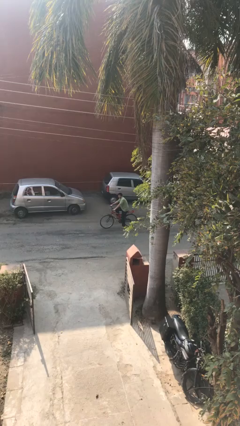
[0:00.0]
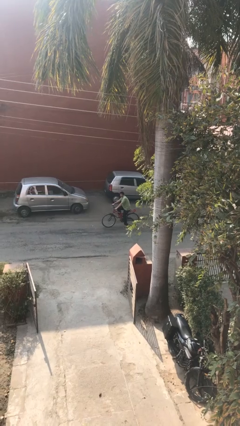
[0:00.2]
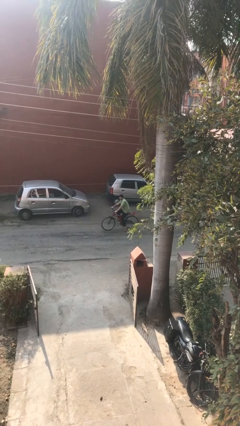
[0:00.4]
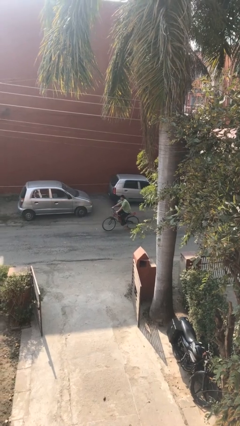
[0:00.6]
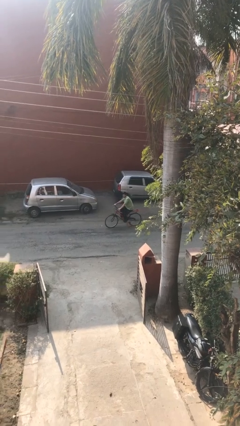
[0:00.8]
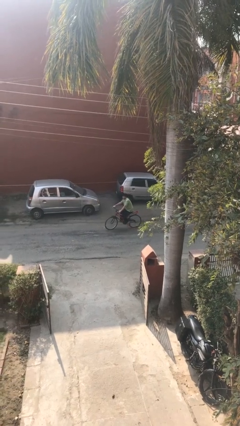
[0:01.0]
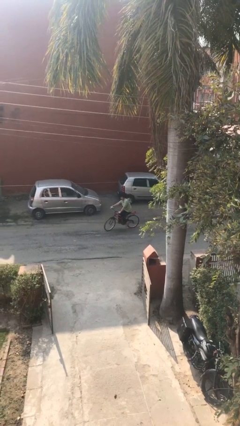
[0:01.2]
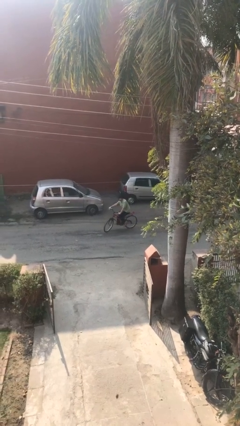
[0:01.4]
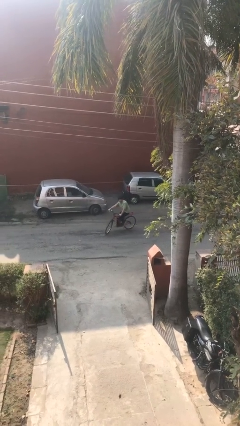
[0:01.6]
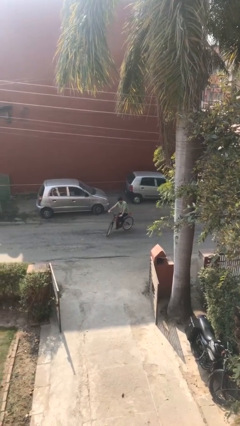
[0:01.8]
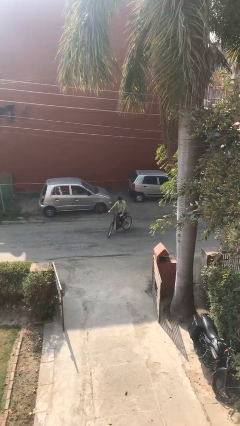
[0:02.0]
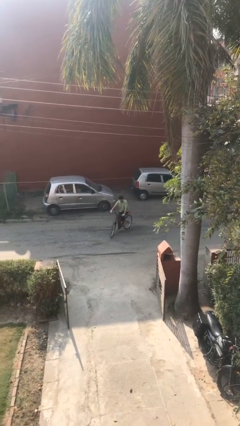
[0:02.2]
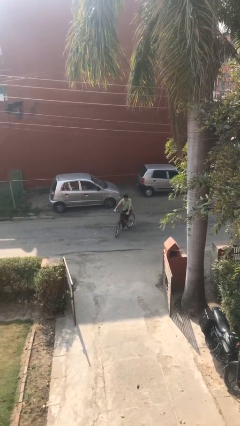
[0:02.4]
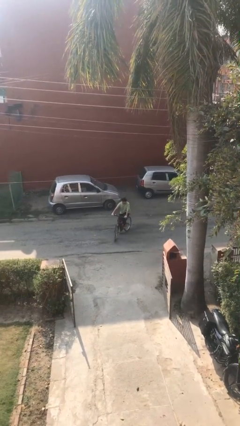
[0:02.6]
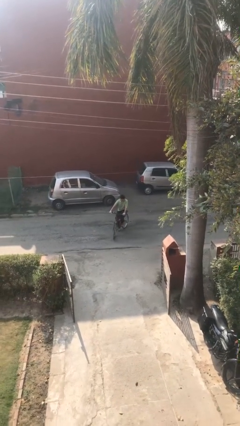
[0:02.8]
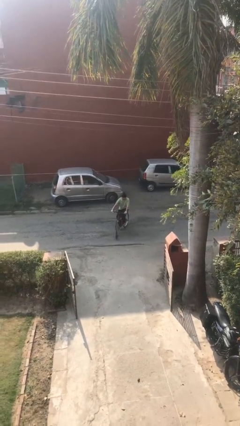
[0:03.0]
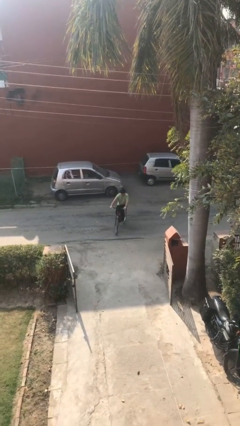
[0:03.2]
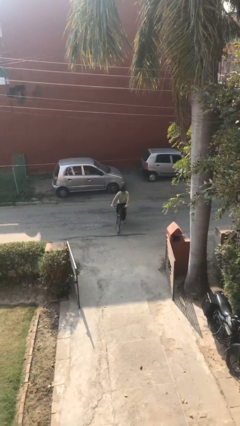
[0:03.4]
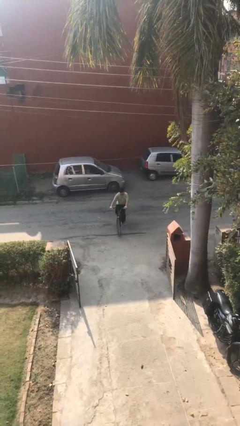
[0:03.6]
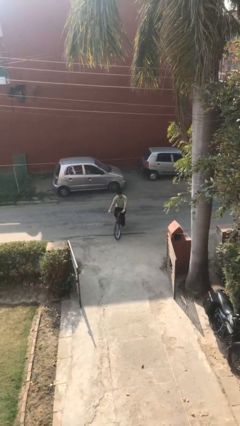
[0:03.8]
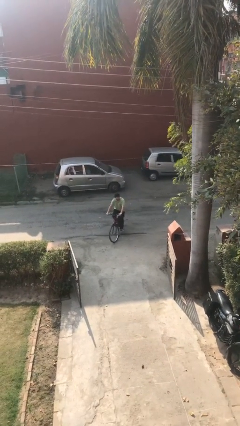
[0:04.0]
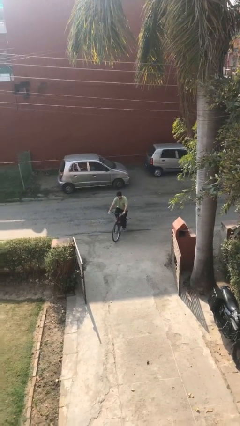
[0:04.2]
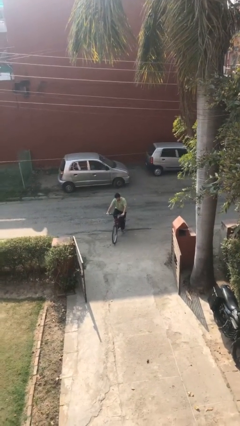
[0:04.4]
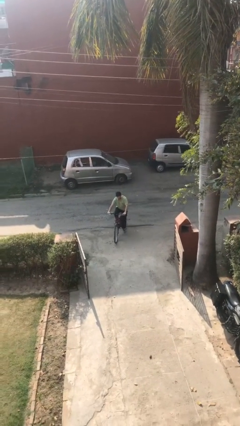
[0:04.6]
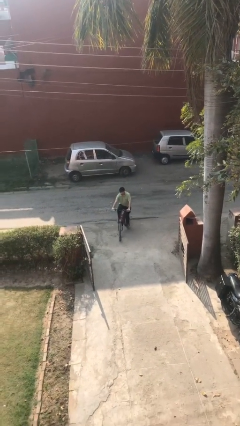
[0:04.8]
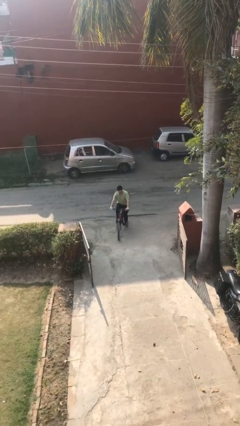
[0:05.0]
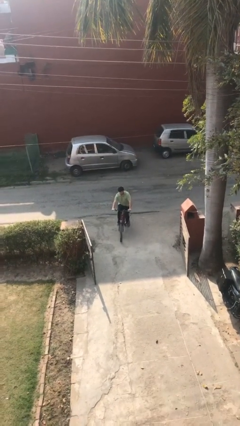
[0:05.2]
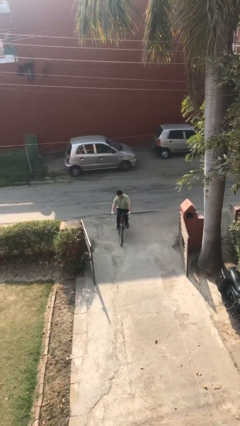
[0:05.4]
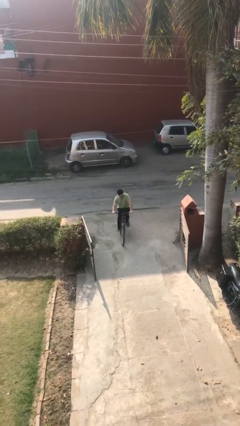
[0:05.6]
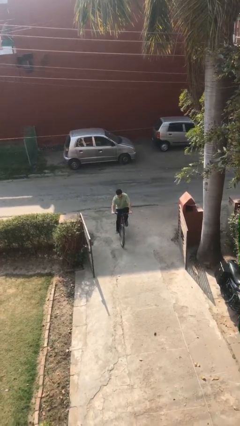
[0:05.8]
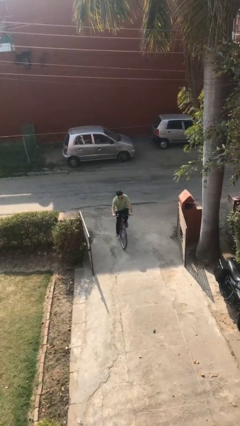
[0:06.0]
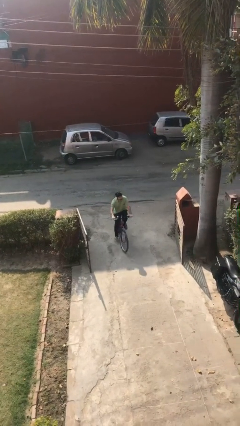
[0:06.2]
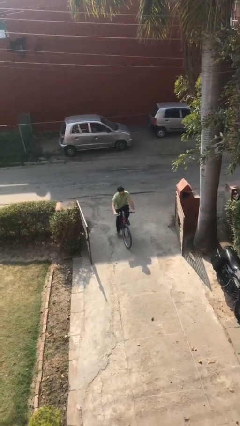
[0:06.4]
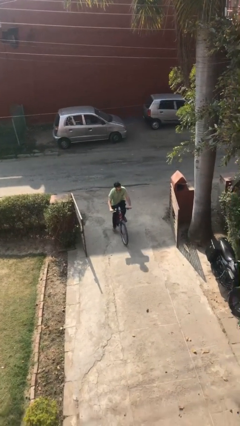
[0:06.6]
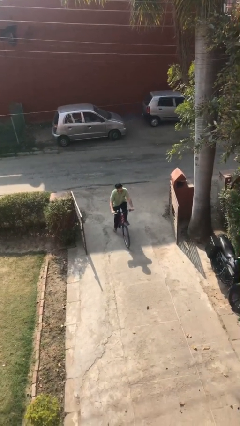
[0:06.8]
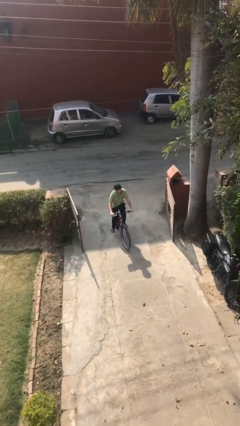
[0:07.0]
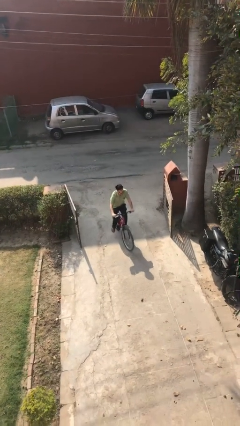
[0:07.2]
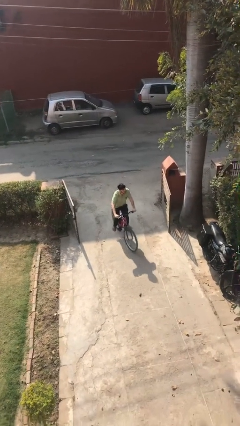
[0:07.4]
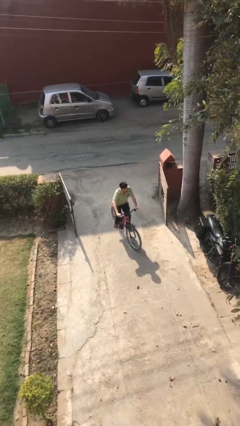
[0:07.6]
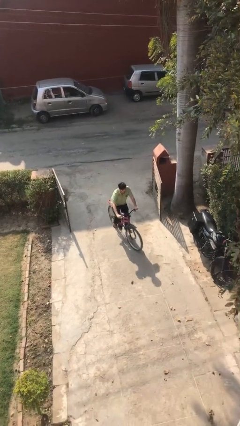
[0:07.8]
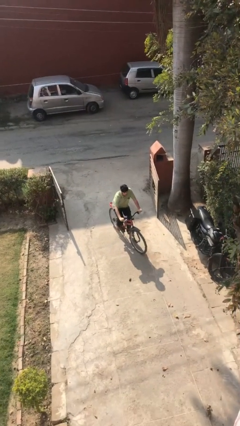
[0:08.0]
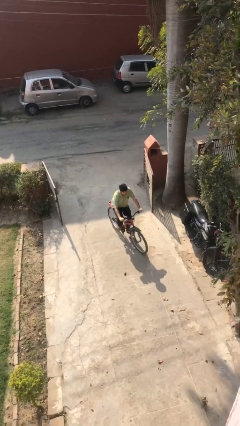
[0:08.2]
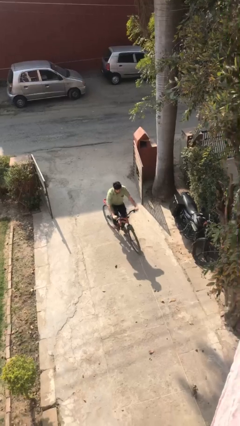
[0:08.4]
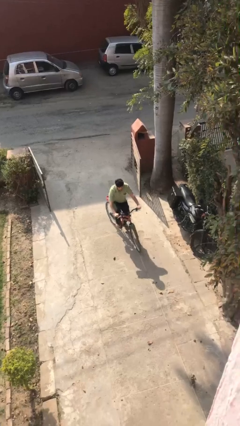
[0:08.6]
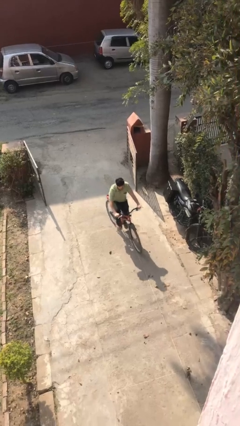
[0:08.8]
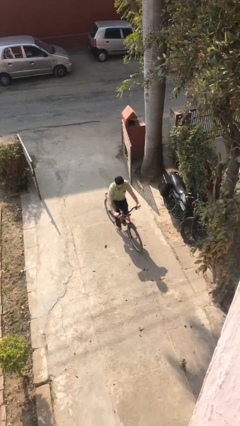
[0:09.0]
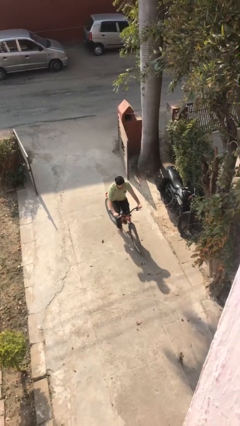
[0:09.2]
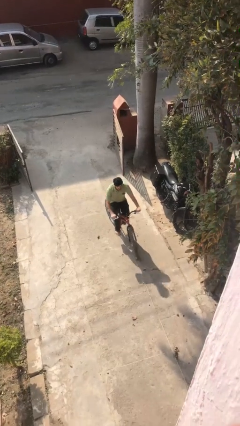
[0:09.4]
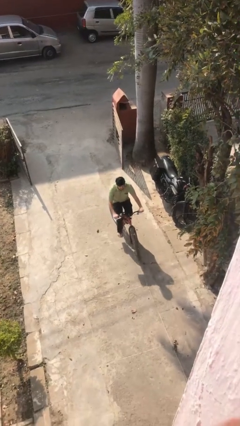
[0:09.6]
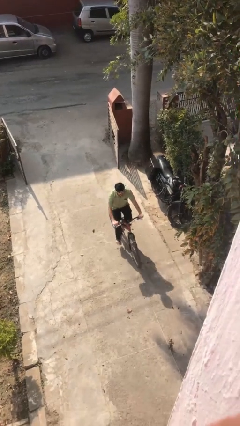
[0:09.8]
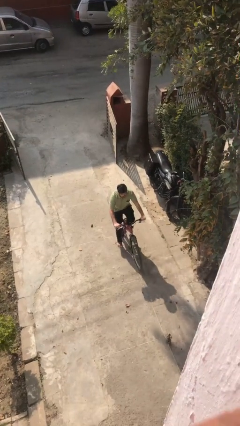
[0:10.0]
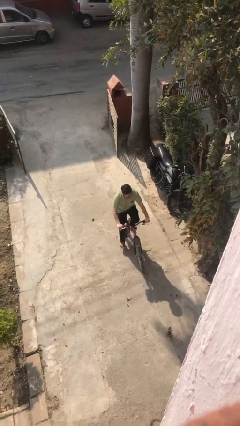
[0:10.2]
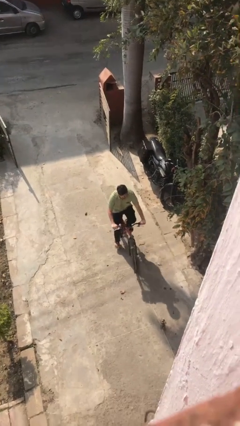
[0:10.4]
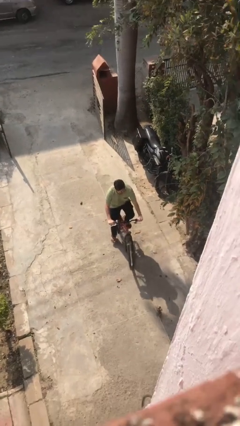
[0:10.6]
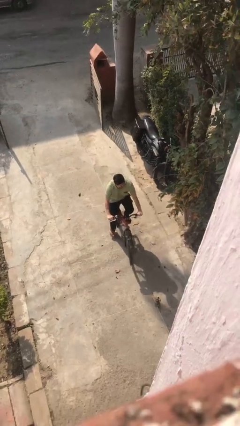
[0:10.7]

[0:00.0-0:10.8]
person rides bicycle

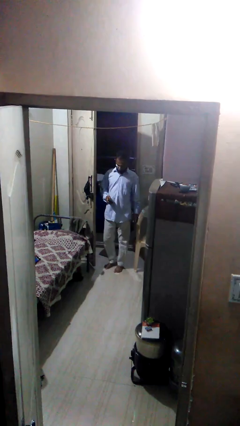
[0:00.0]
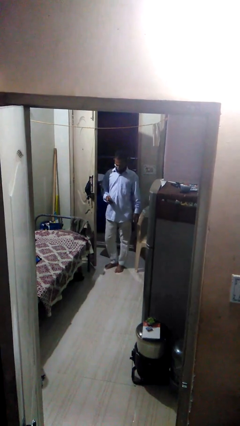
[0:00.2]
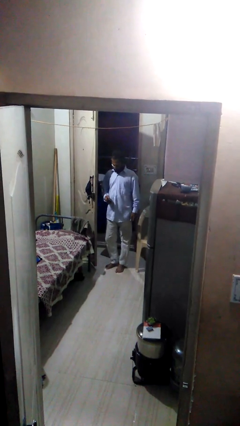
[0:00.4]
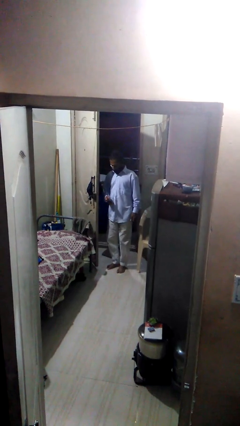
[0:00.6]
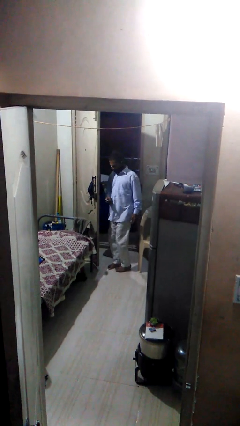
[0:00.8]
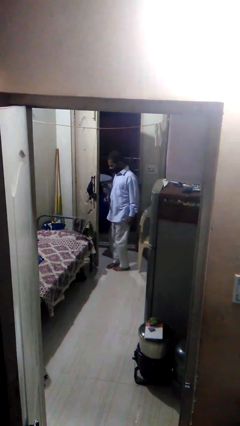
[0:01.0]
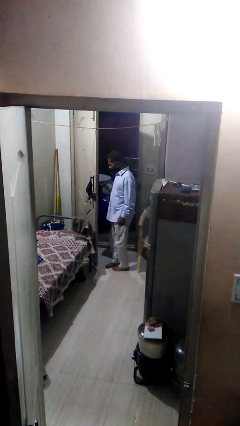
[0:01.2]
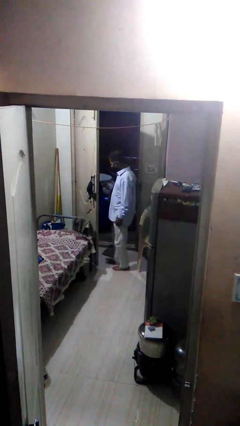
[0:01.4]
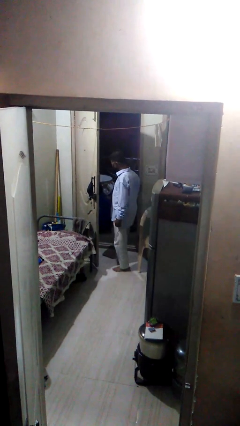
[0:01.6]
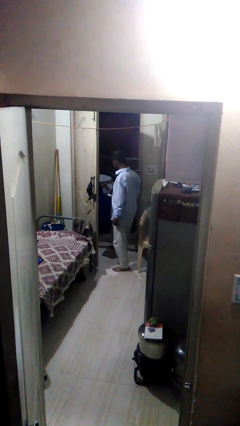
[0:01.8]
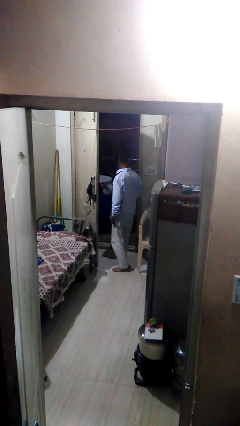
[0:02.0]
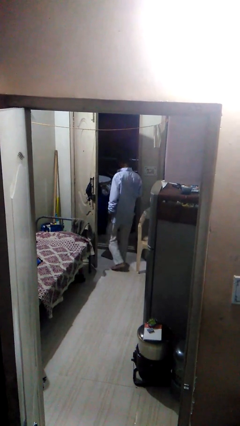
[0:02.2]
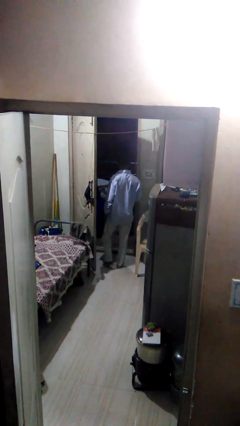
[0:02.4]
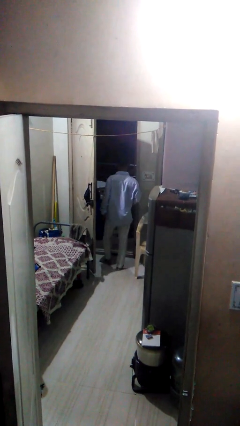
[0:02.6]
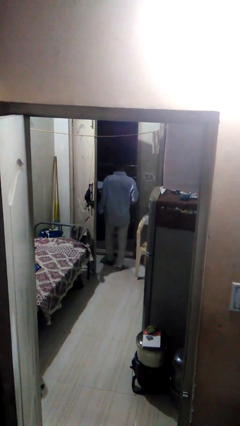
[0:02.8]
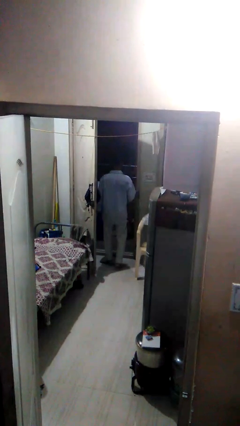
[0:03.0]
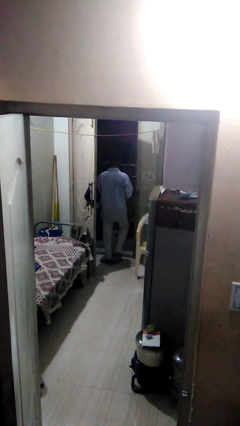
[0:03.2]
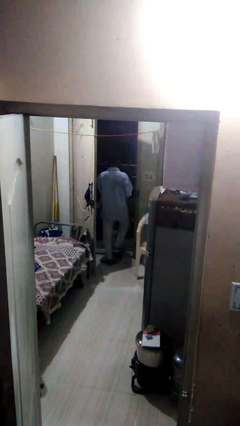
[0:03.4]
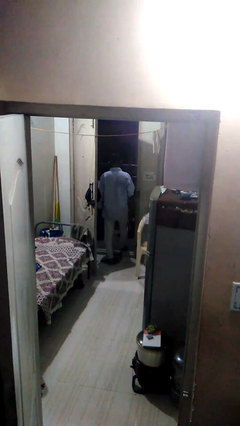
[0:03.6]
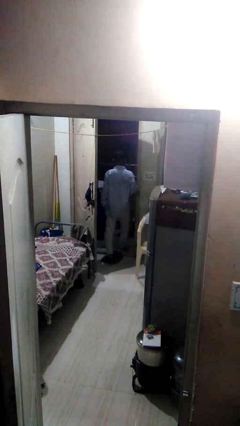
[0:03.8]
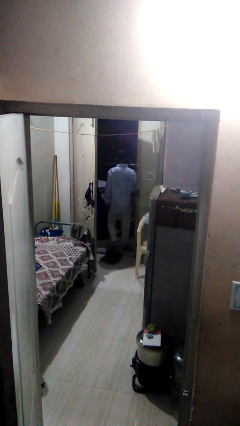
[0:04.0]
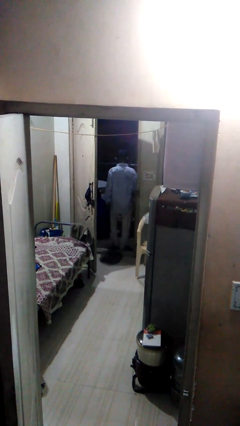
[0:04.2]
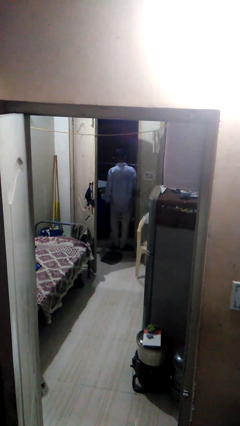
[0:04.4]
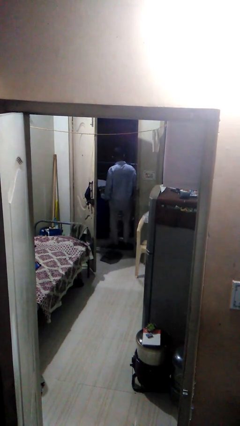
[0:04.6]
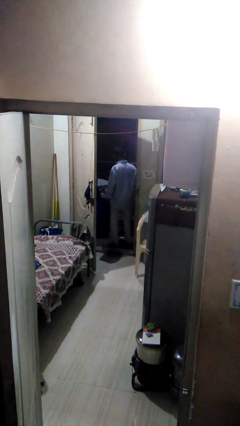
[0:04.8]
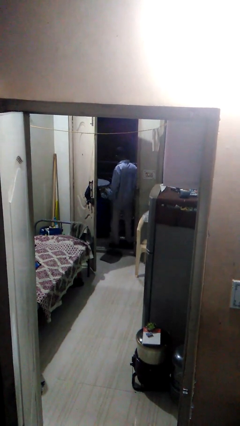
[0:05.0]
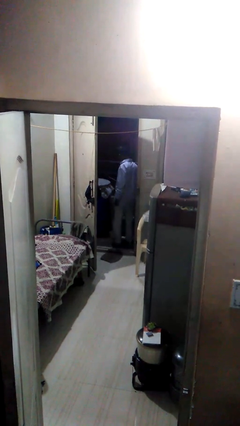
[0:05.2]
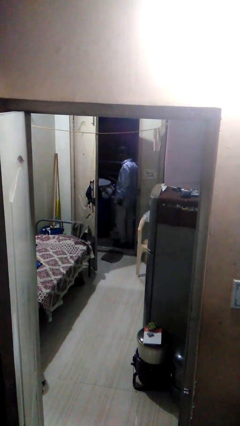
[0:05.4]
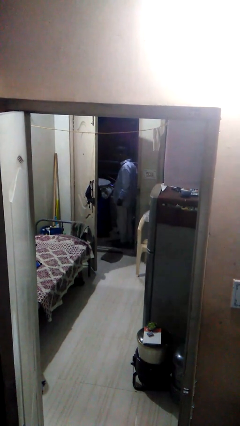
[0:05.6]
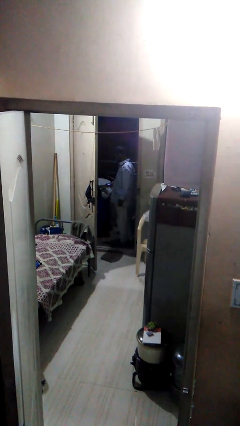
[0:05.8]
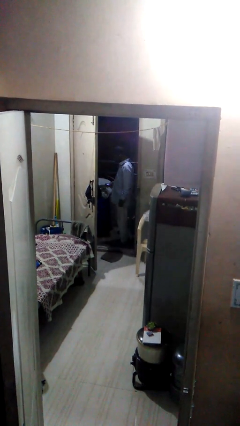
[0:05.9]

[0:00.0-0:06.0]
person exits scene through structure

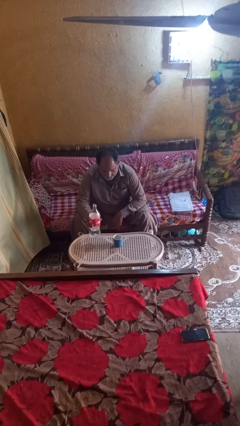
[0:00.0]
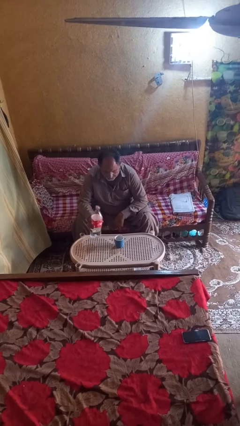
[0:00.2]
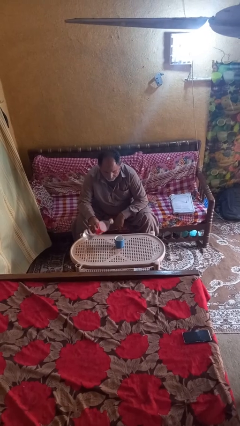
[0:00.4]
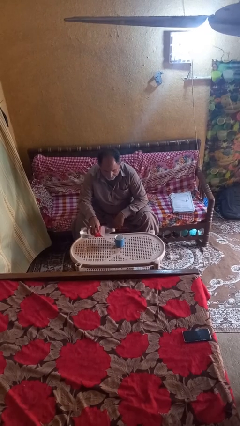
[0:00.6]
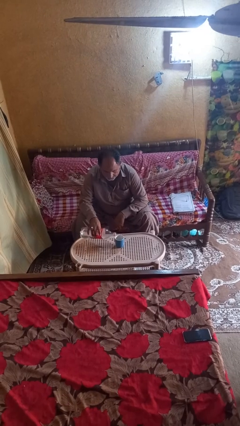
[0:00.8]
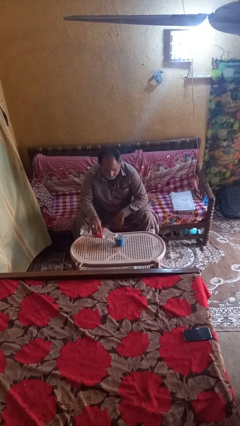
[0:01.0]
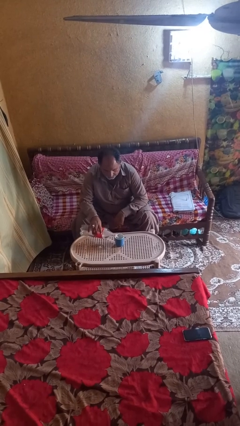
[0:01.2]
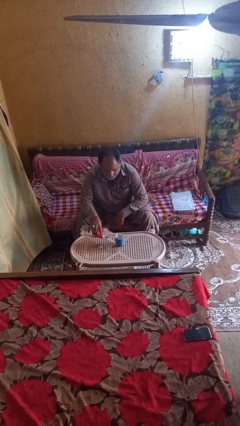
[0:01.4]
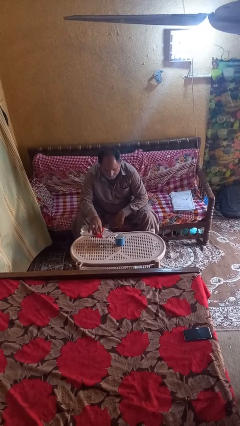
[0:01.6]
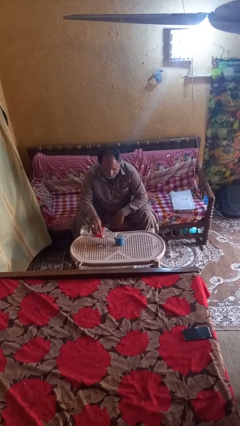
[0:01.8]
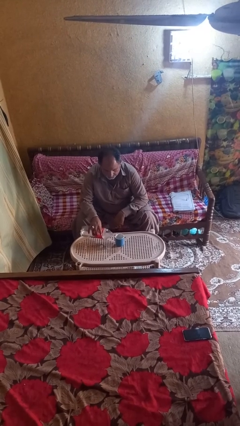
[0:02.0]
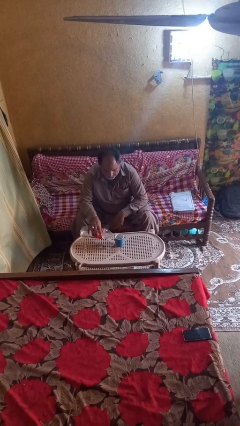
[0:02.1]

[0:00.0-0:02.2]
person pours liquid into cup
